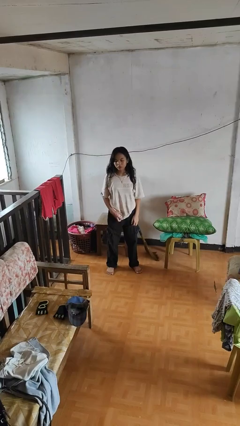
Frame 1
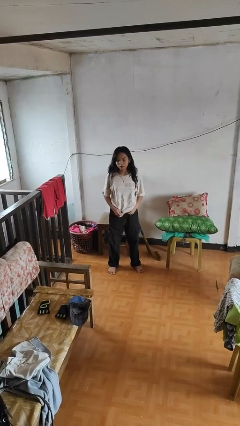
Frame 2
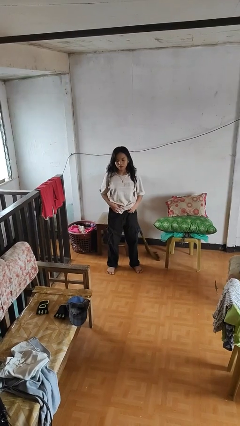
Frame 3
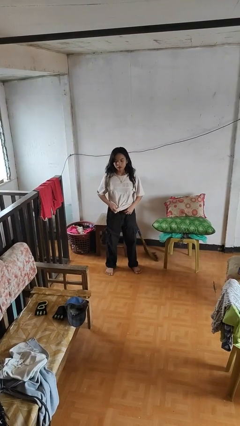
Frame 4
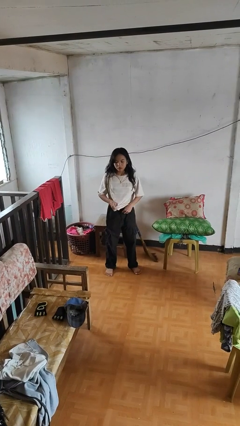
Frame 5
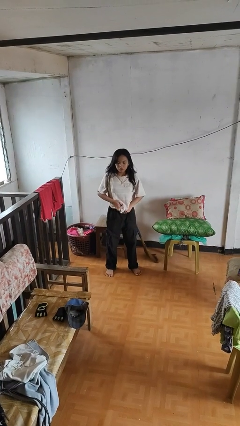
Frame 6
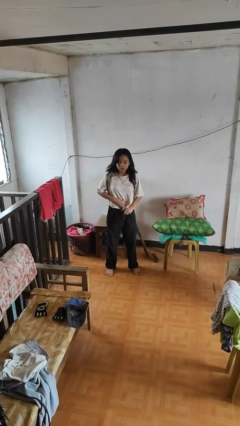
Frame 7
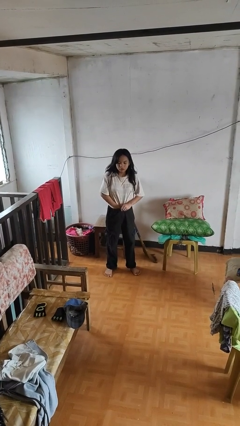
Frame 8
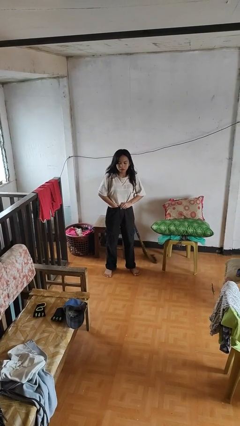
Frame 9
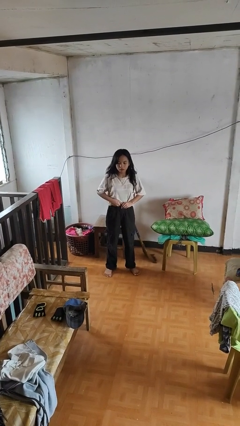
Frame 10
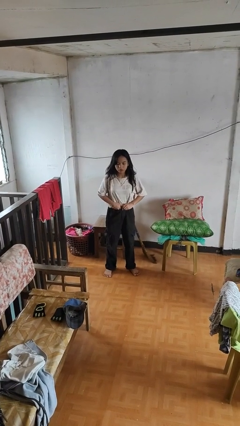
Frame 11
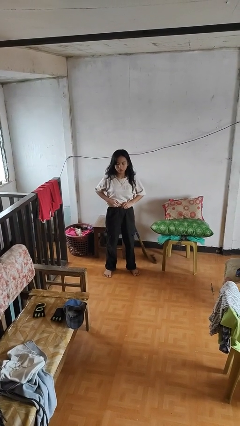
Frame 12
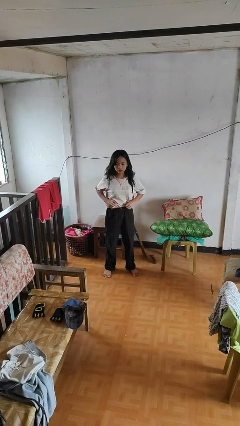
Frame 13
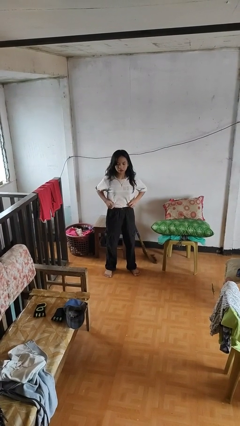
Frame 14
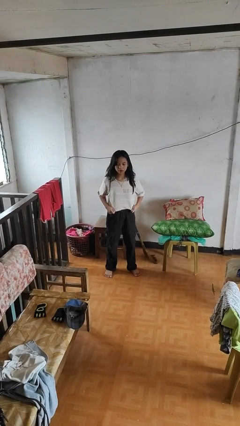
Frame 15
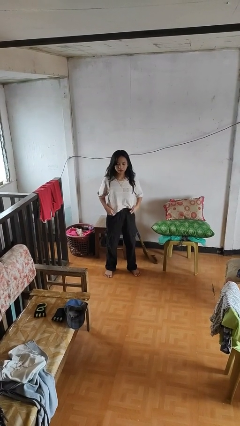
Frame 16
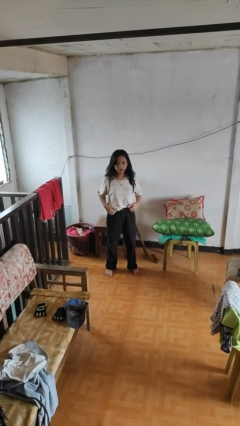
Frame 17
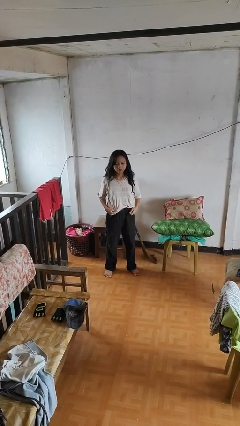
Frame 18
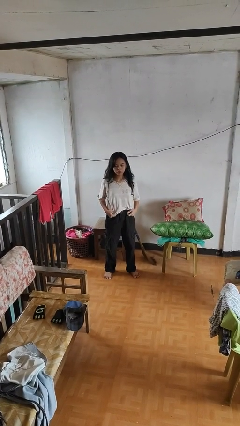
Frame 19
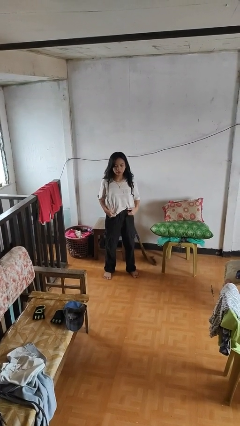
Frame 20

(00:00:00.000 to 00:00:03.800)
person tucks in shirt

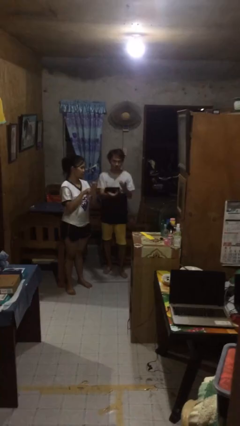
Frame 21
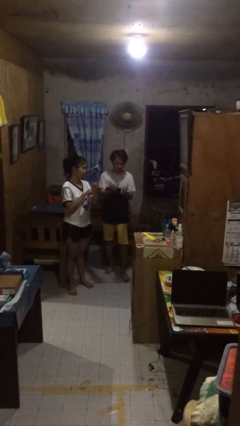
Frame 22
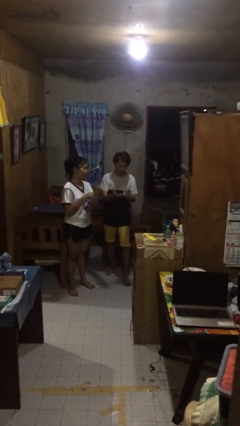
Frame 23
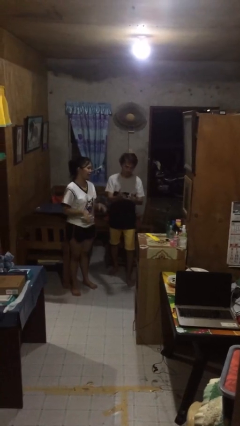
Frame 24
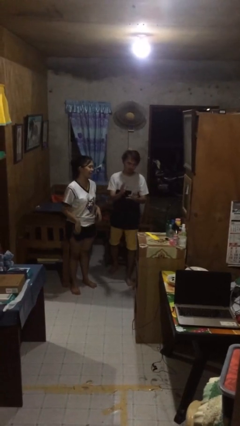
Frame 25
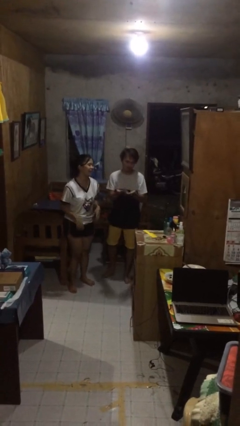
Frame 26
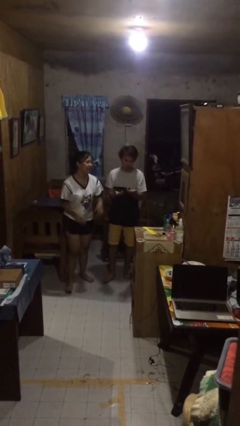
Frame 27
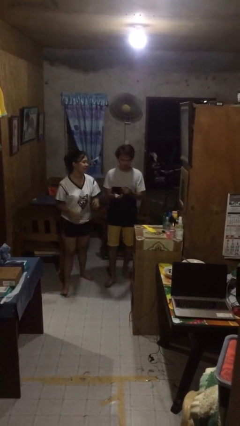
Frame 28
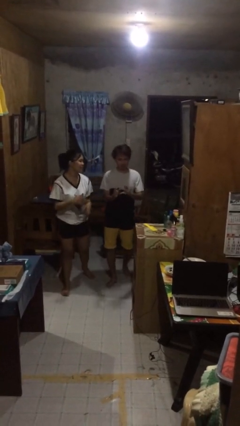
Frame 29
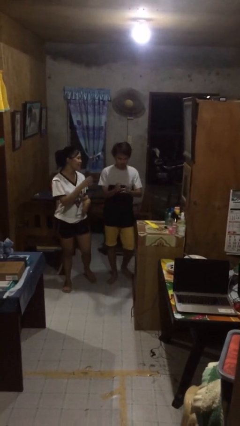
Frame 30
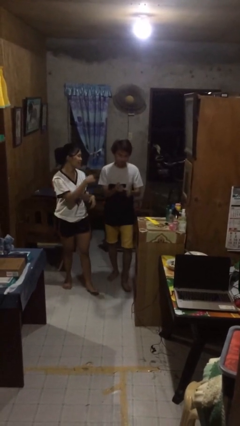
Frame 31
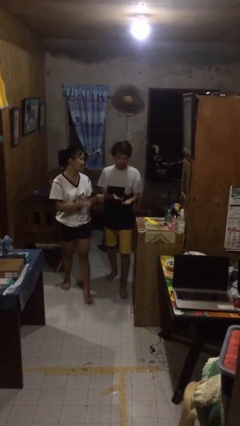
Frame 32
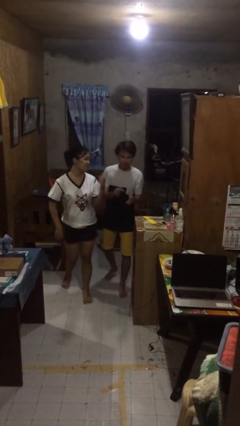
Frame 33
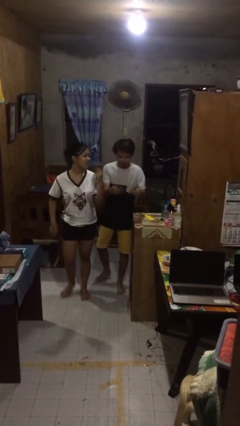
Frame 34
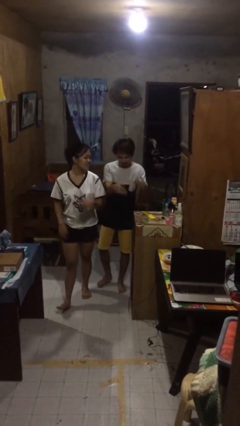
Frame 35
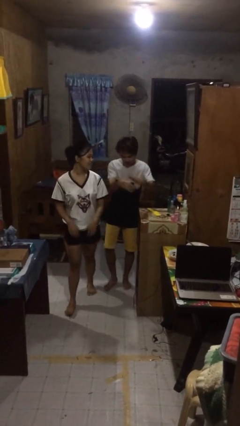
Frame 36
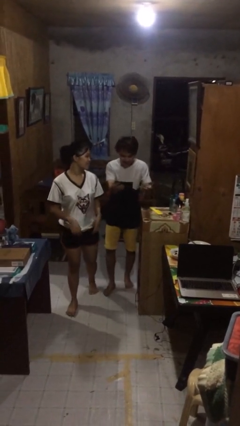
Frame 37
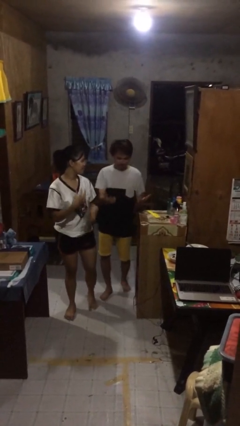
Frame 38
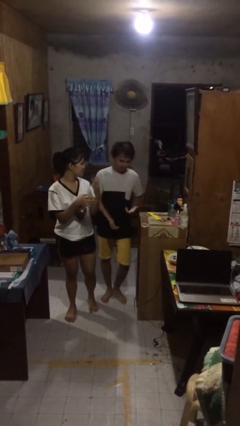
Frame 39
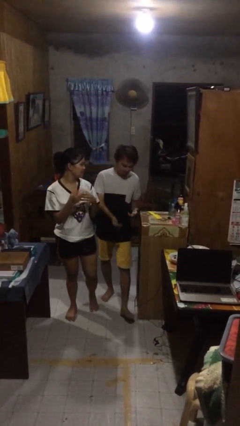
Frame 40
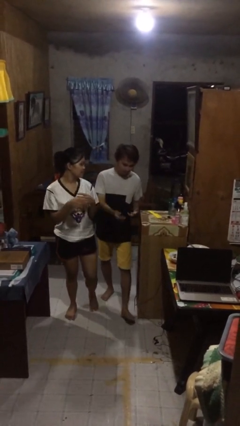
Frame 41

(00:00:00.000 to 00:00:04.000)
person talks to person

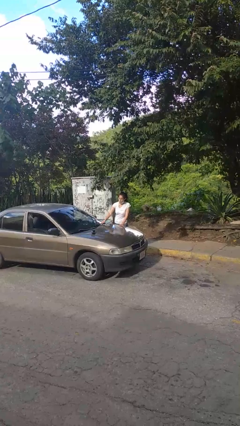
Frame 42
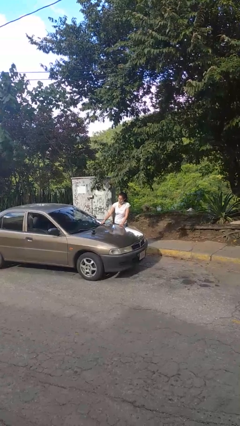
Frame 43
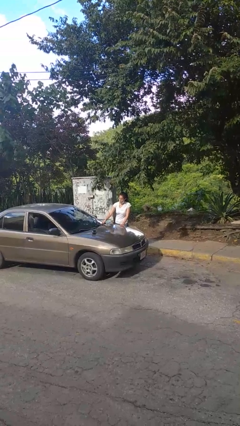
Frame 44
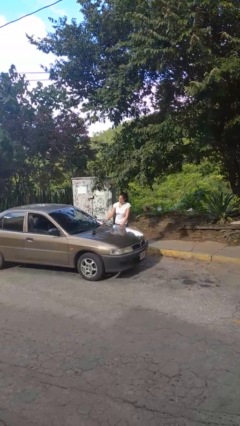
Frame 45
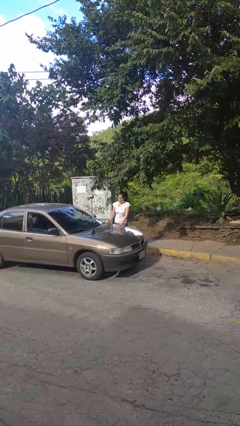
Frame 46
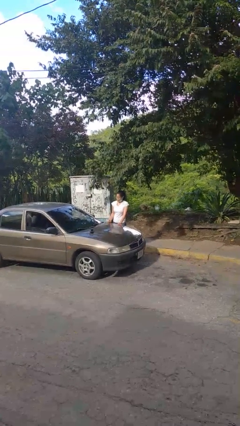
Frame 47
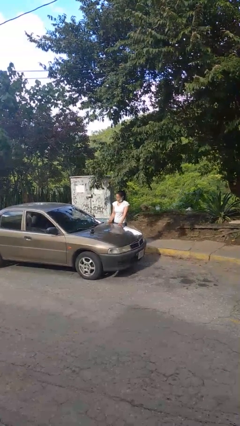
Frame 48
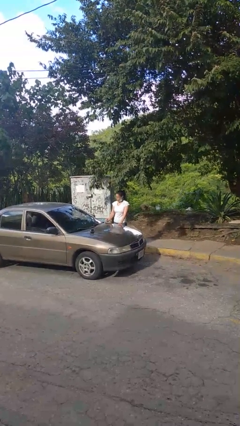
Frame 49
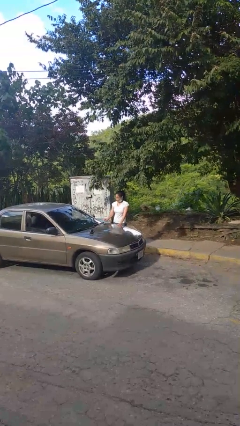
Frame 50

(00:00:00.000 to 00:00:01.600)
person flips down car wipers

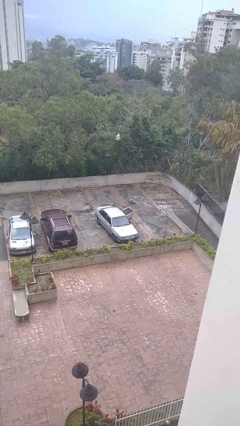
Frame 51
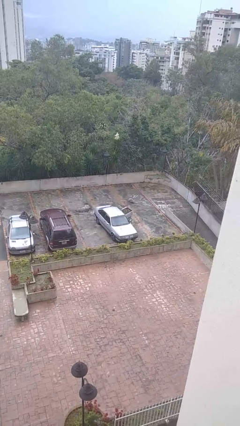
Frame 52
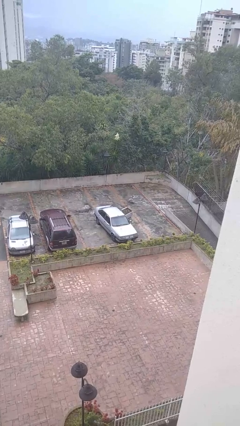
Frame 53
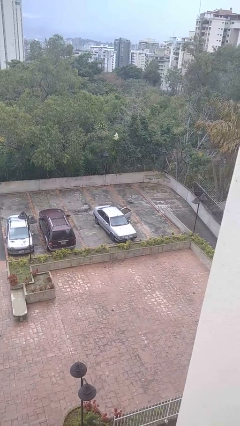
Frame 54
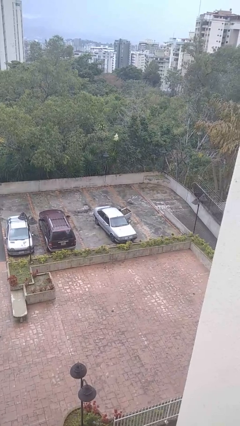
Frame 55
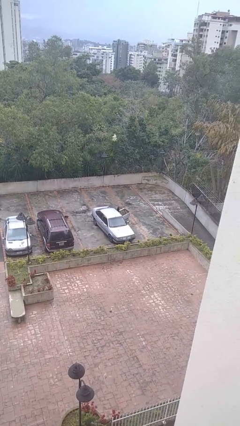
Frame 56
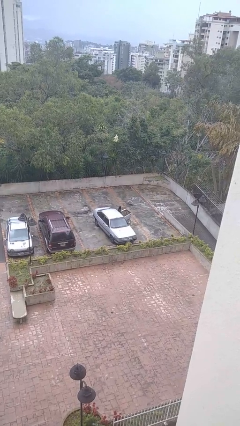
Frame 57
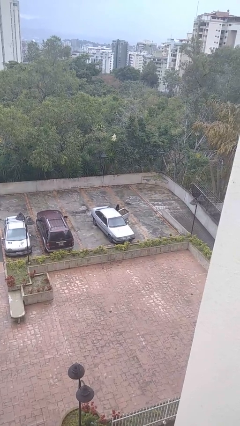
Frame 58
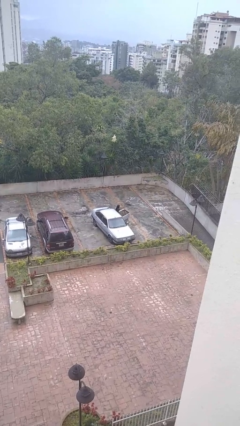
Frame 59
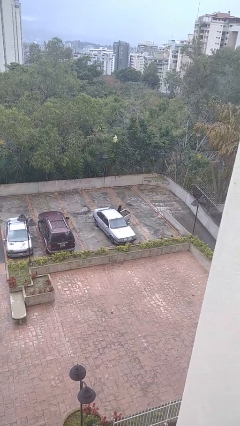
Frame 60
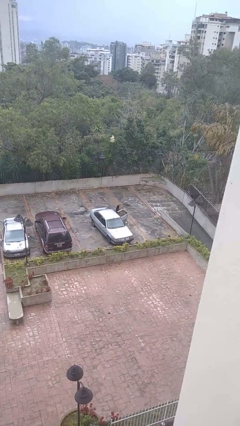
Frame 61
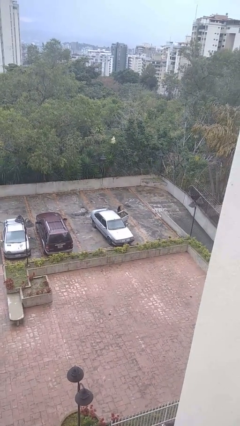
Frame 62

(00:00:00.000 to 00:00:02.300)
person exits car

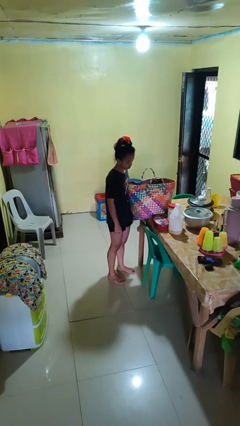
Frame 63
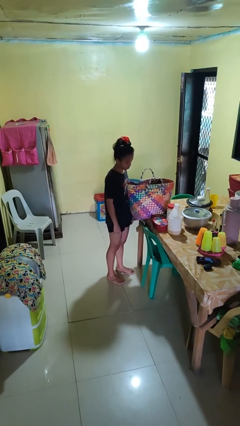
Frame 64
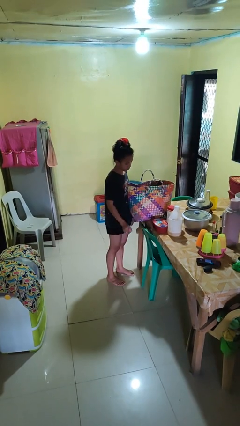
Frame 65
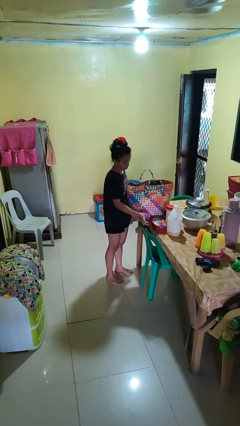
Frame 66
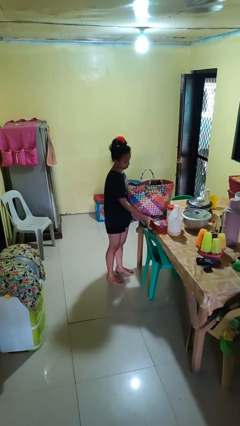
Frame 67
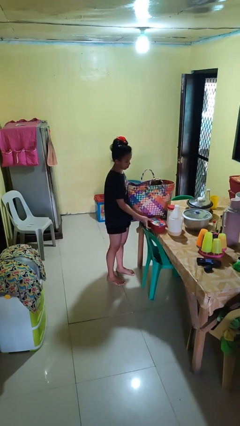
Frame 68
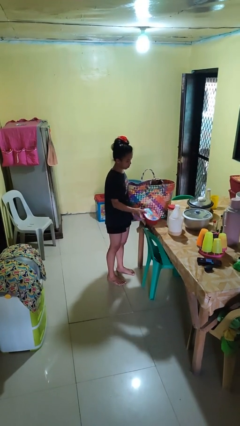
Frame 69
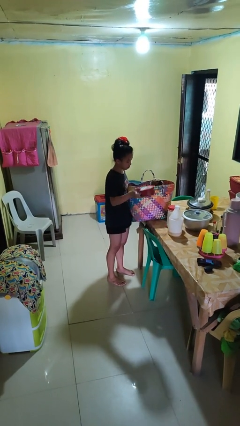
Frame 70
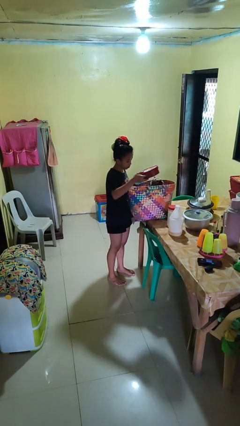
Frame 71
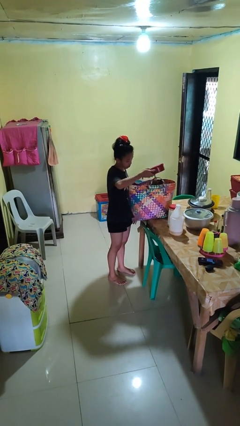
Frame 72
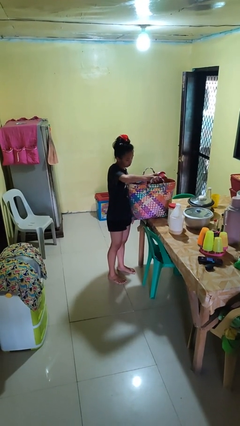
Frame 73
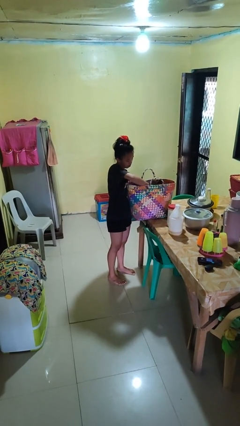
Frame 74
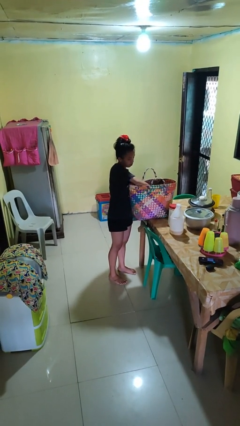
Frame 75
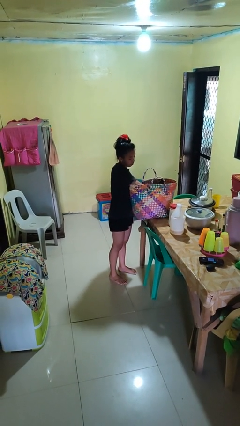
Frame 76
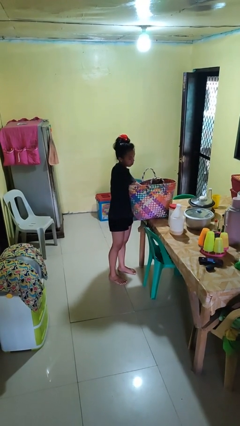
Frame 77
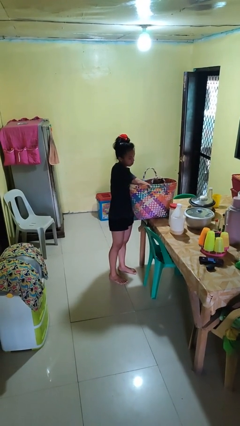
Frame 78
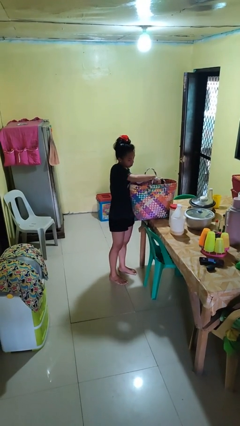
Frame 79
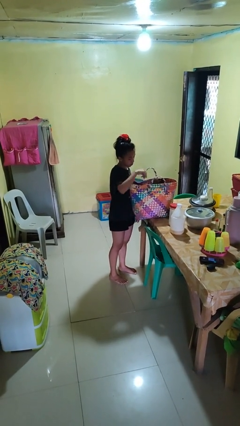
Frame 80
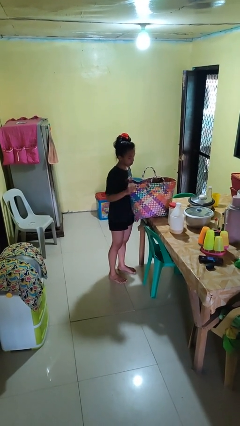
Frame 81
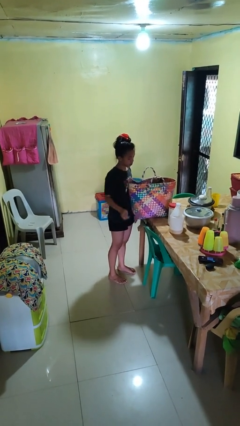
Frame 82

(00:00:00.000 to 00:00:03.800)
person puts object into basket

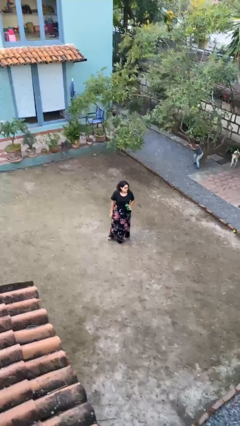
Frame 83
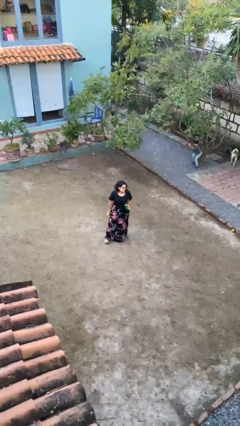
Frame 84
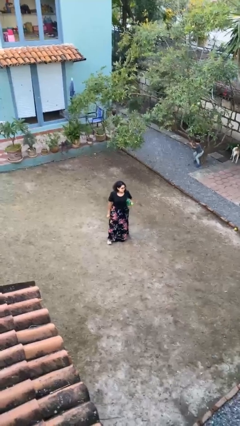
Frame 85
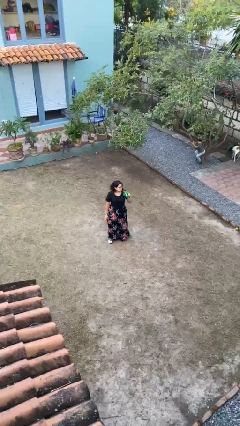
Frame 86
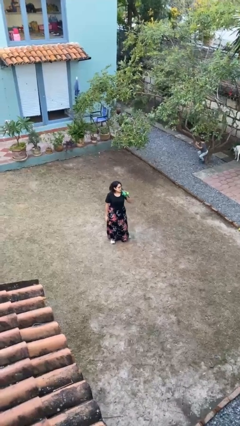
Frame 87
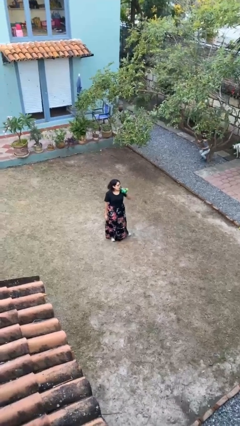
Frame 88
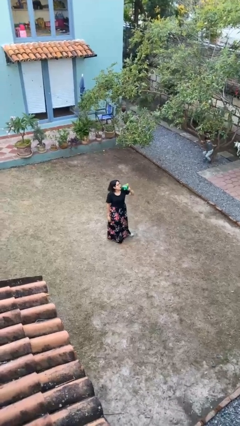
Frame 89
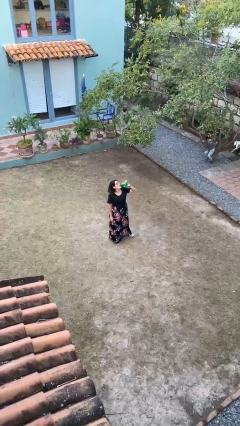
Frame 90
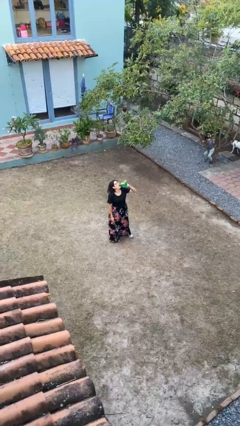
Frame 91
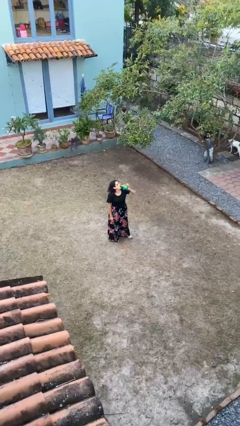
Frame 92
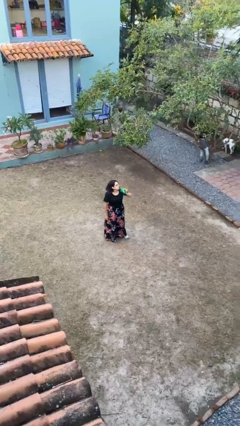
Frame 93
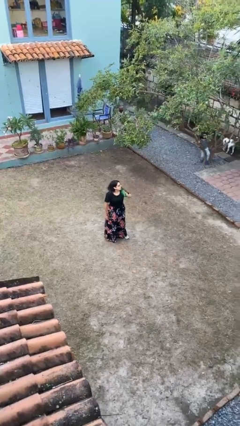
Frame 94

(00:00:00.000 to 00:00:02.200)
person drinks from bottle
